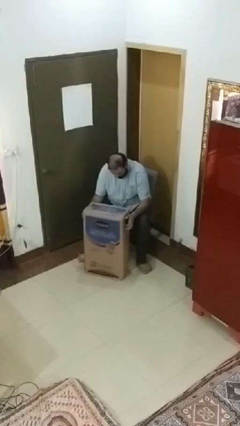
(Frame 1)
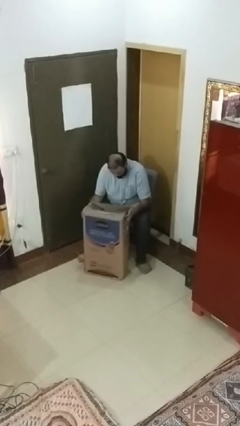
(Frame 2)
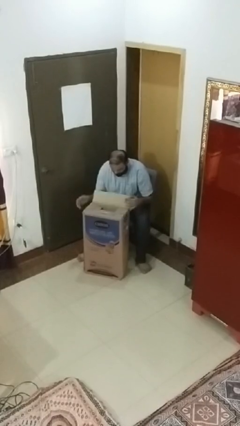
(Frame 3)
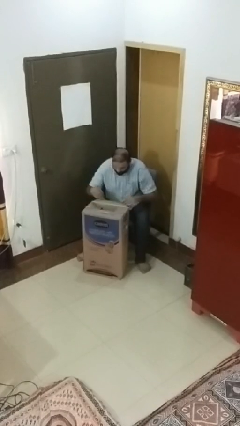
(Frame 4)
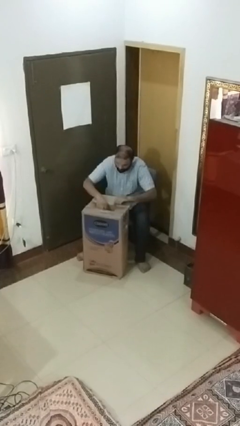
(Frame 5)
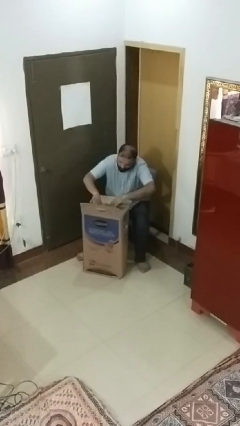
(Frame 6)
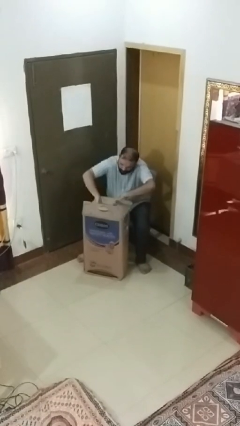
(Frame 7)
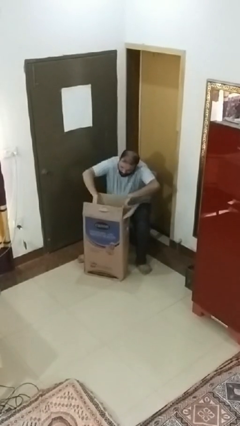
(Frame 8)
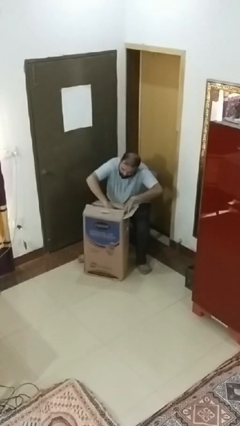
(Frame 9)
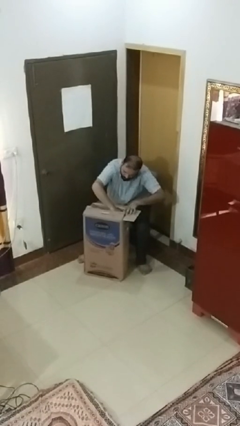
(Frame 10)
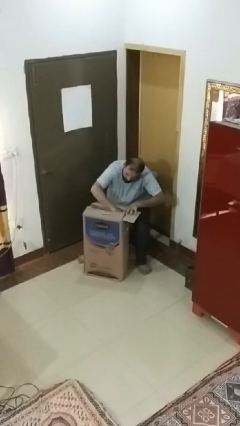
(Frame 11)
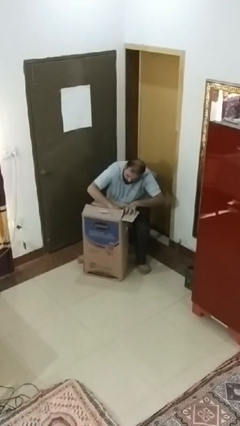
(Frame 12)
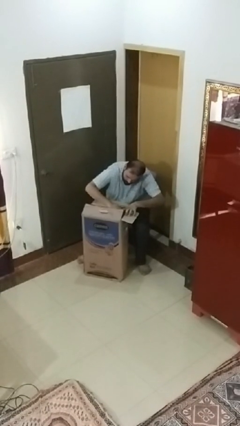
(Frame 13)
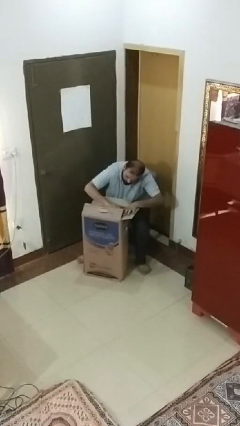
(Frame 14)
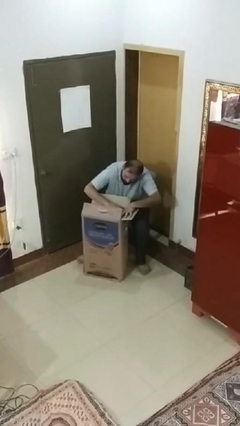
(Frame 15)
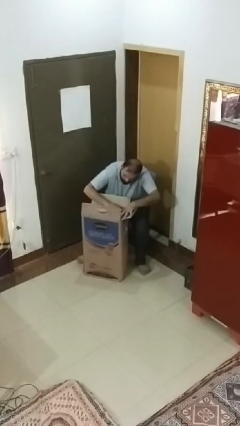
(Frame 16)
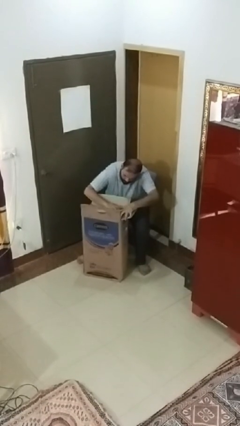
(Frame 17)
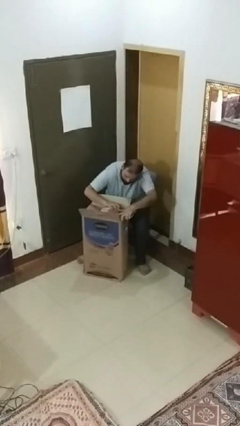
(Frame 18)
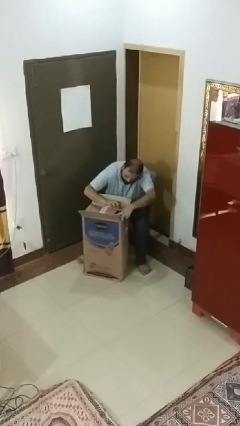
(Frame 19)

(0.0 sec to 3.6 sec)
person searches in box

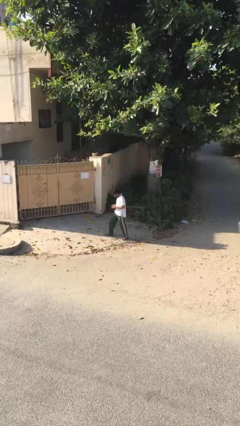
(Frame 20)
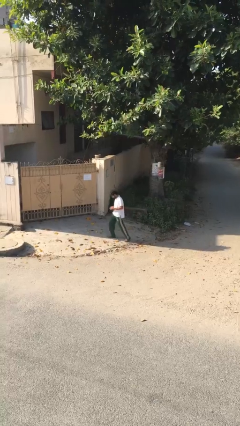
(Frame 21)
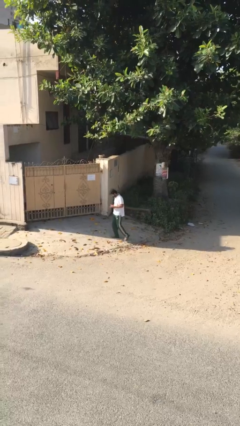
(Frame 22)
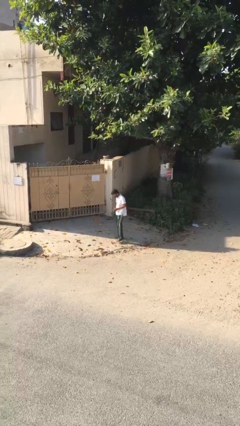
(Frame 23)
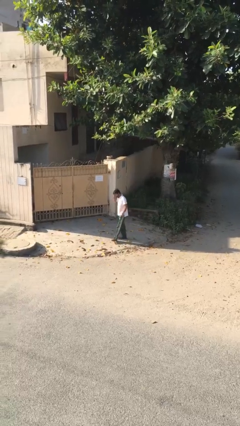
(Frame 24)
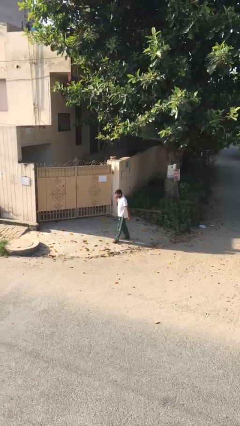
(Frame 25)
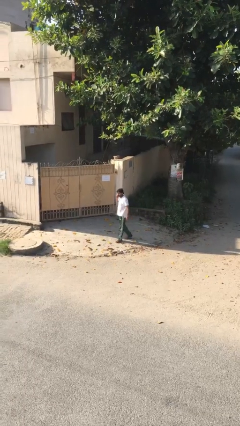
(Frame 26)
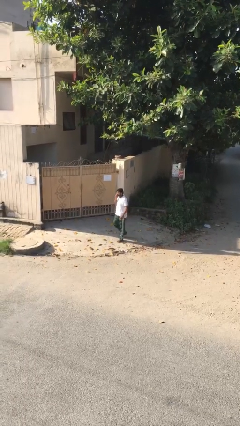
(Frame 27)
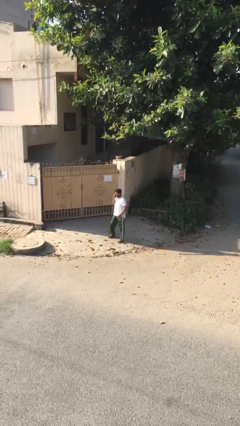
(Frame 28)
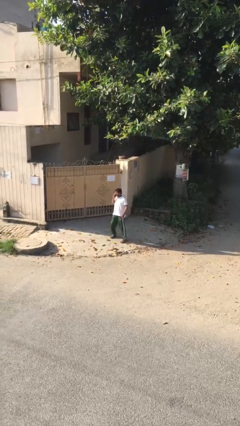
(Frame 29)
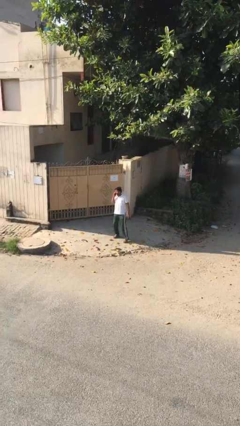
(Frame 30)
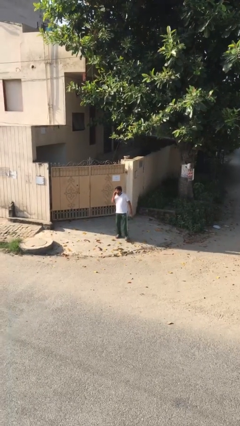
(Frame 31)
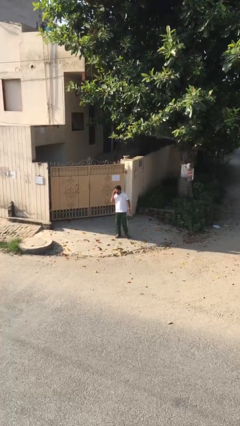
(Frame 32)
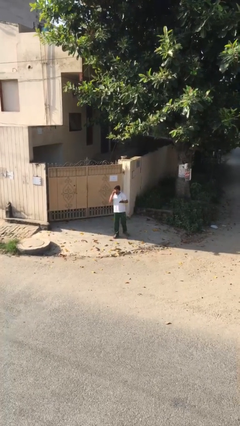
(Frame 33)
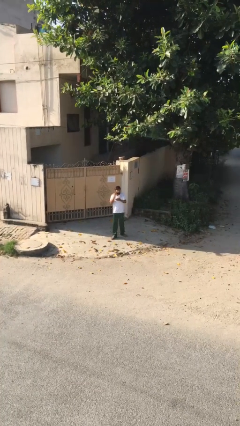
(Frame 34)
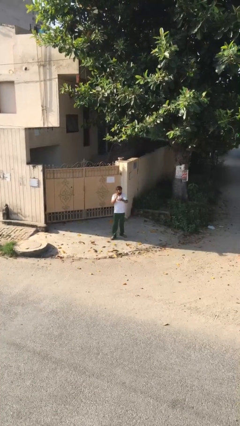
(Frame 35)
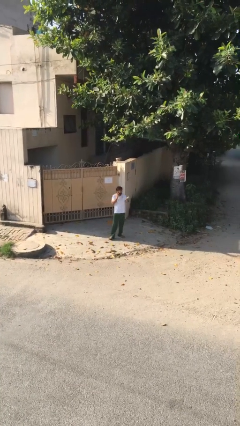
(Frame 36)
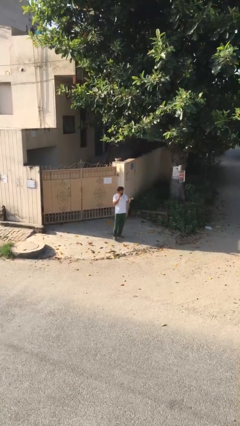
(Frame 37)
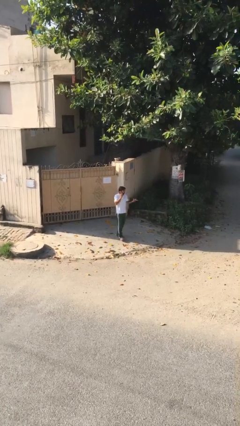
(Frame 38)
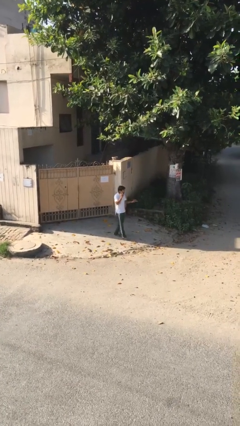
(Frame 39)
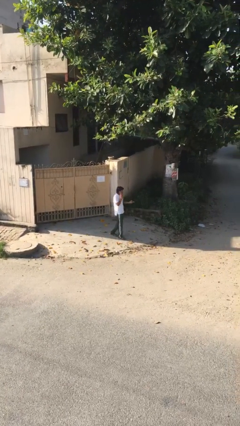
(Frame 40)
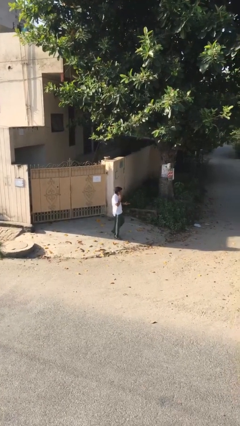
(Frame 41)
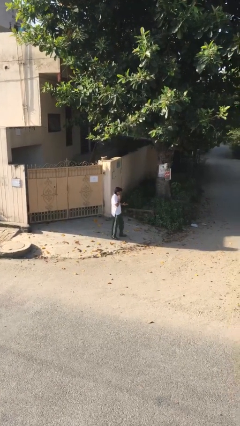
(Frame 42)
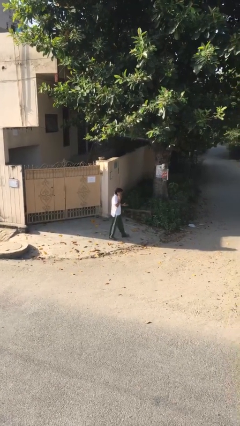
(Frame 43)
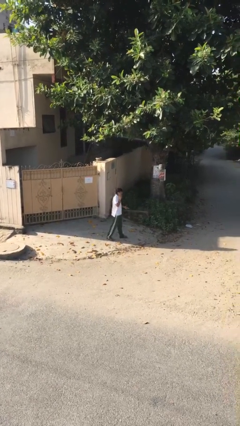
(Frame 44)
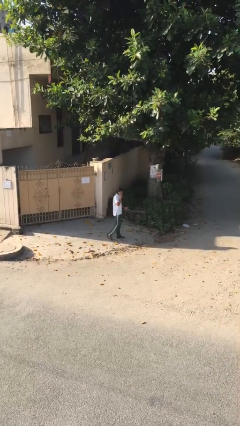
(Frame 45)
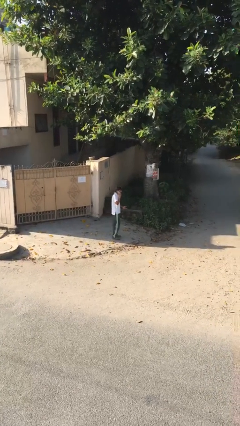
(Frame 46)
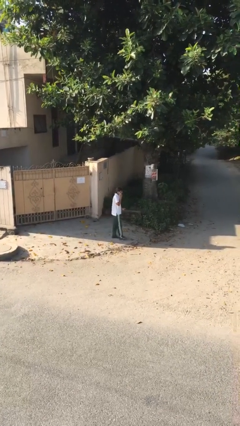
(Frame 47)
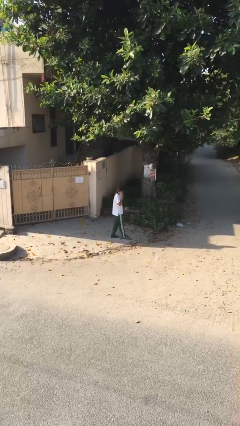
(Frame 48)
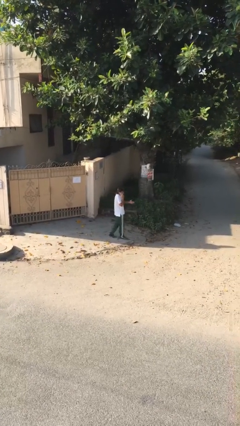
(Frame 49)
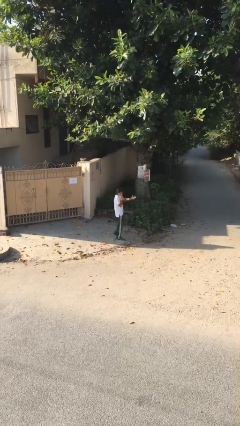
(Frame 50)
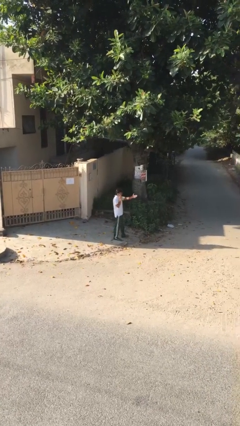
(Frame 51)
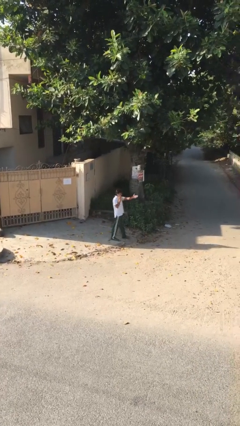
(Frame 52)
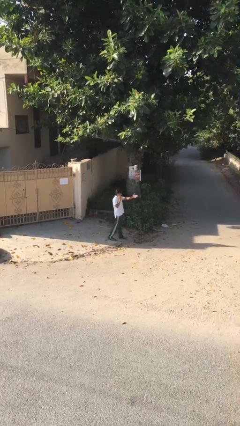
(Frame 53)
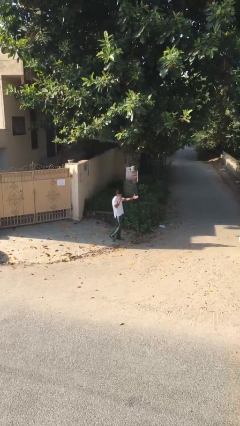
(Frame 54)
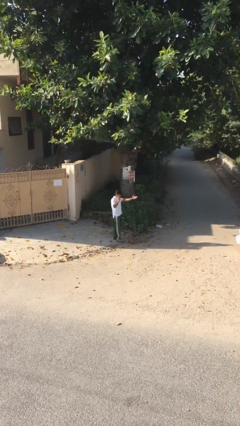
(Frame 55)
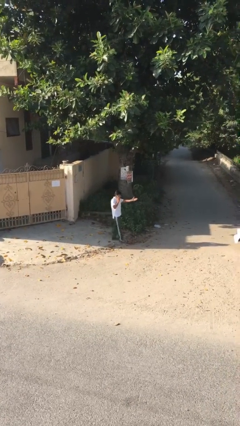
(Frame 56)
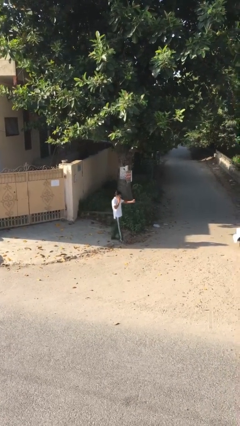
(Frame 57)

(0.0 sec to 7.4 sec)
person talks on phone

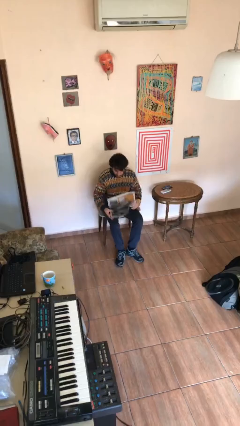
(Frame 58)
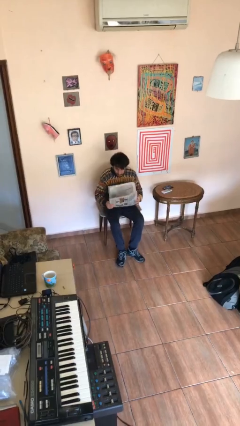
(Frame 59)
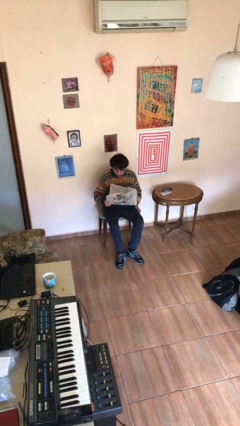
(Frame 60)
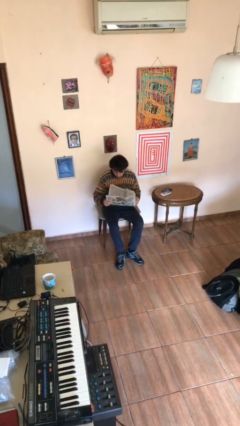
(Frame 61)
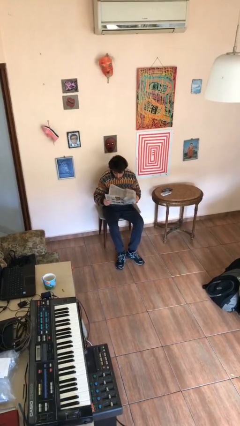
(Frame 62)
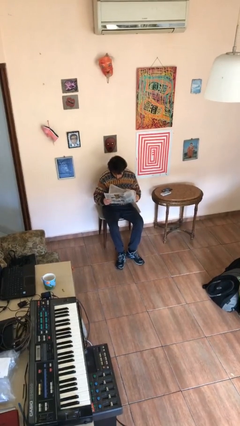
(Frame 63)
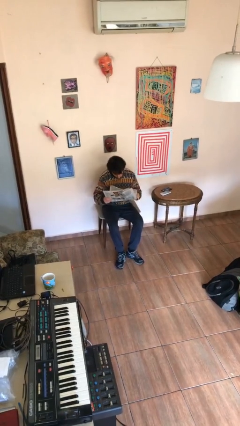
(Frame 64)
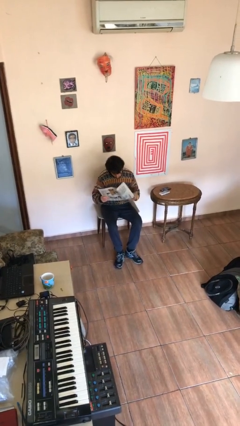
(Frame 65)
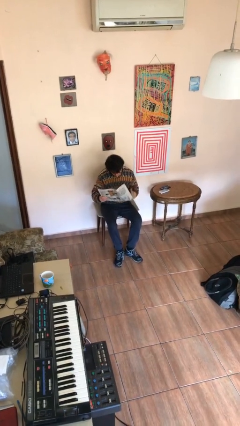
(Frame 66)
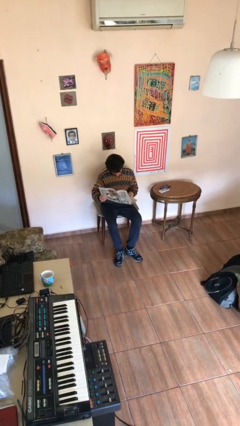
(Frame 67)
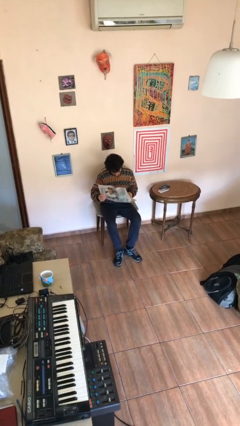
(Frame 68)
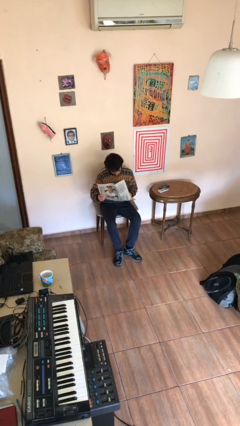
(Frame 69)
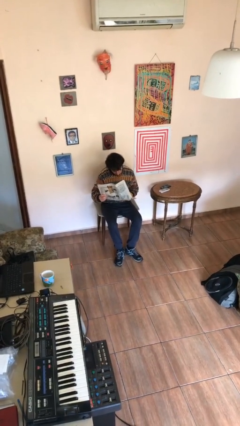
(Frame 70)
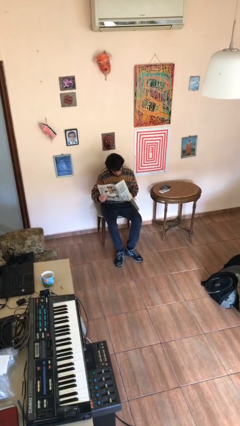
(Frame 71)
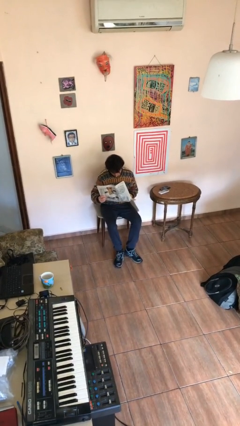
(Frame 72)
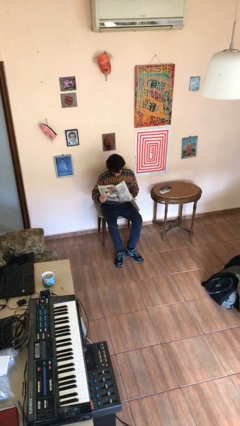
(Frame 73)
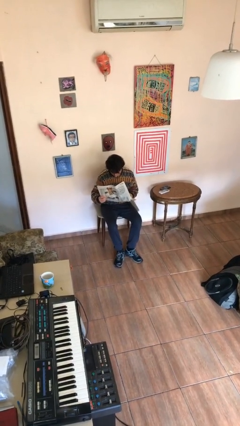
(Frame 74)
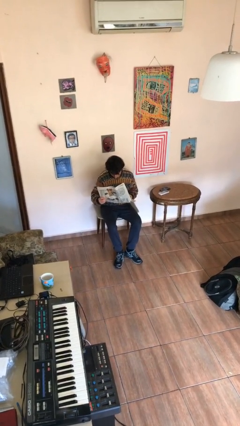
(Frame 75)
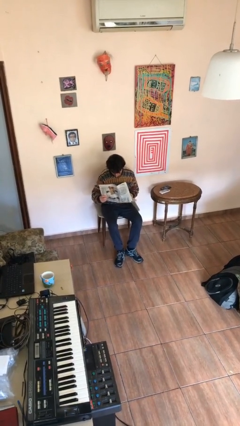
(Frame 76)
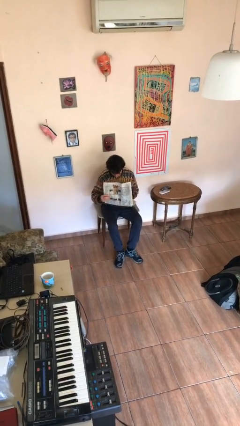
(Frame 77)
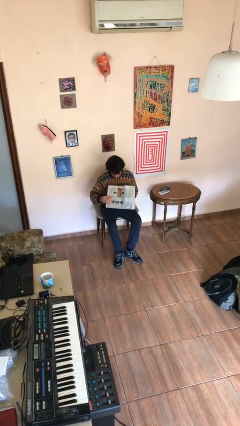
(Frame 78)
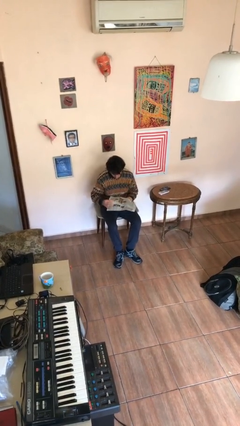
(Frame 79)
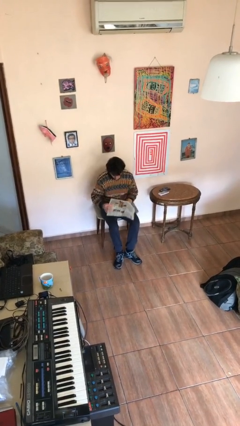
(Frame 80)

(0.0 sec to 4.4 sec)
person reads newspaper

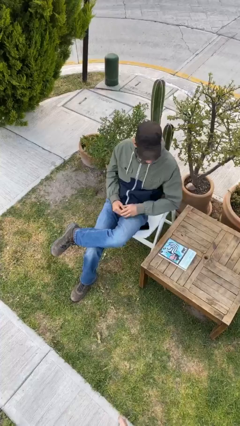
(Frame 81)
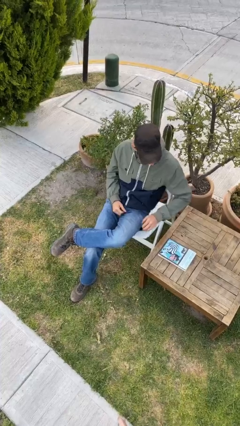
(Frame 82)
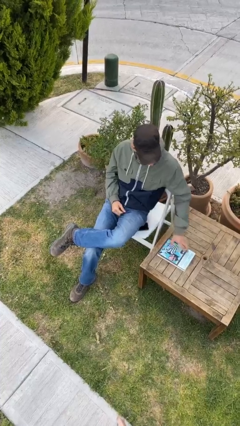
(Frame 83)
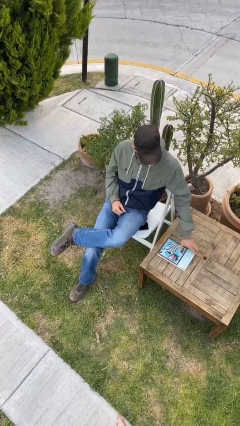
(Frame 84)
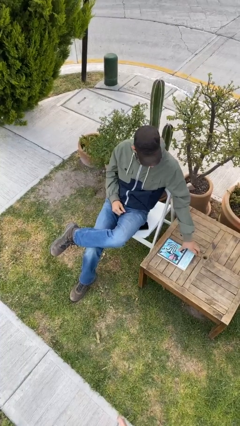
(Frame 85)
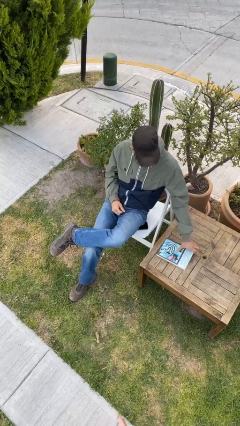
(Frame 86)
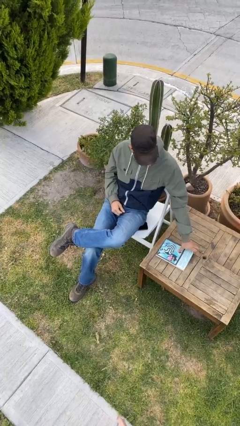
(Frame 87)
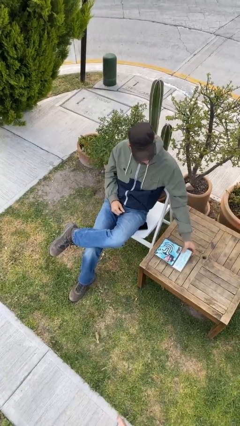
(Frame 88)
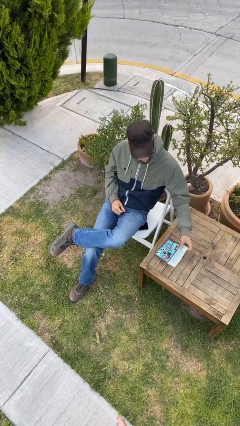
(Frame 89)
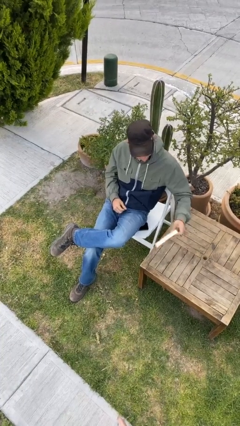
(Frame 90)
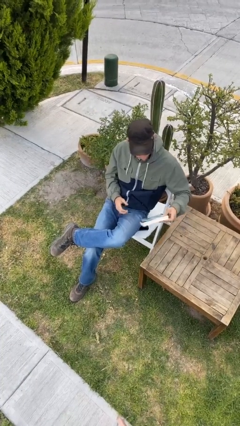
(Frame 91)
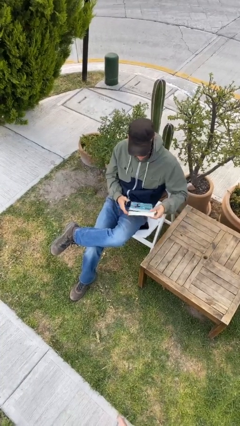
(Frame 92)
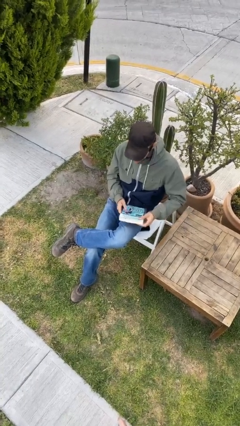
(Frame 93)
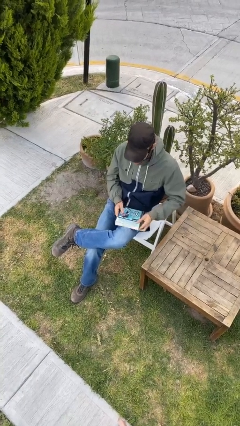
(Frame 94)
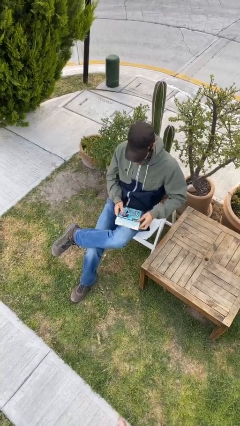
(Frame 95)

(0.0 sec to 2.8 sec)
person picks up object from table
